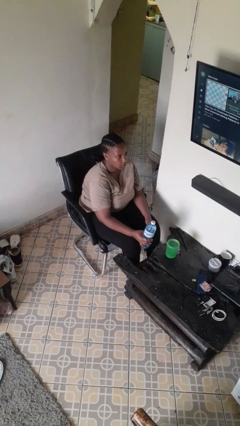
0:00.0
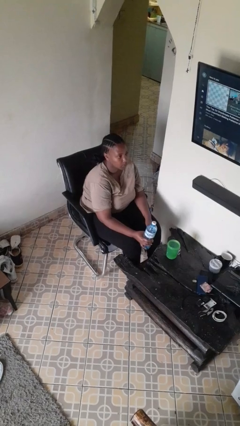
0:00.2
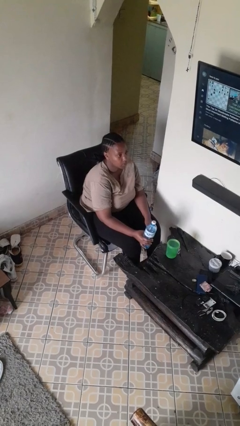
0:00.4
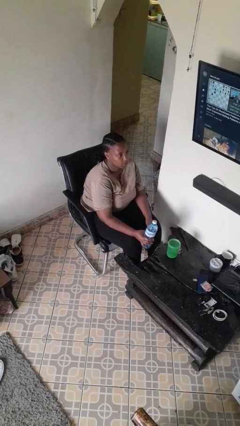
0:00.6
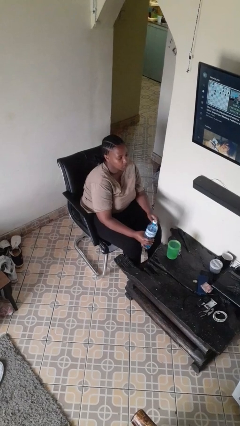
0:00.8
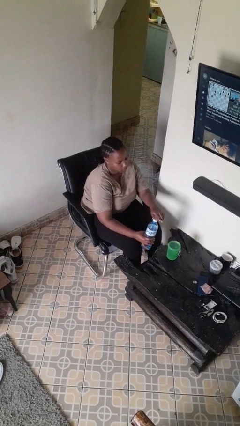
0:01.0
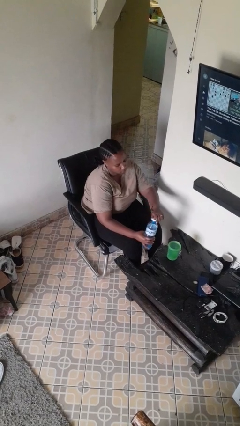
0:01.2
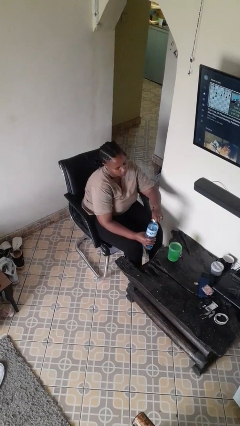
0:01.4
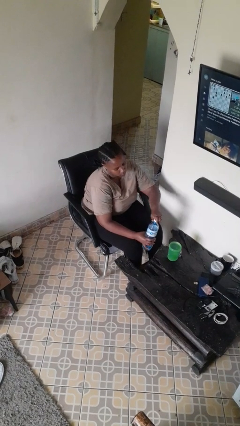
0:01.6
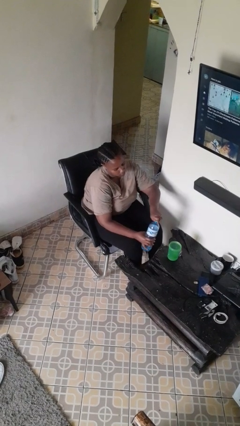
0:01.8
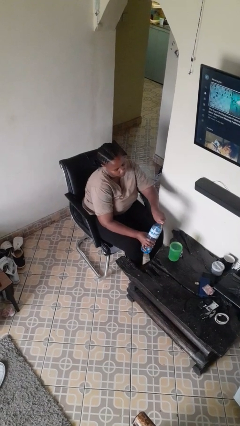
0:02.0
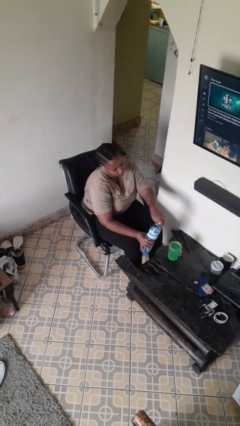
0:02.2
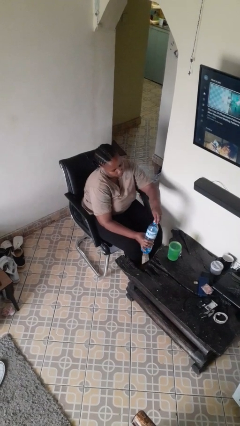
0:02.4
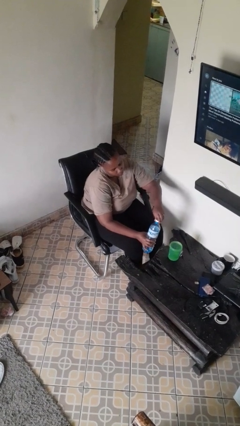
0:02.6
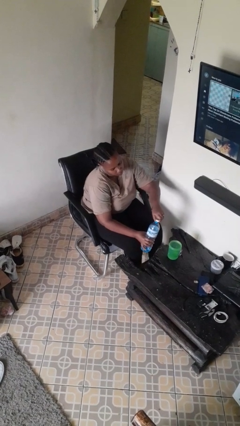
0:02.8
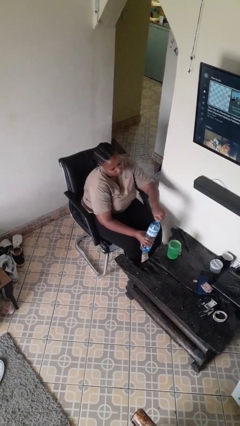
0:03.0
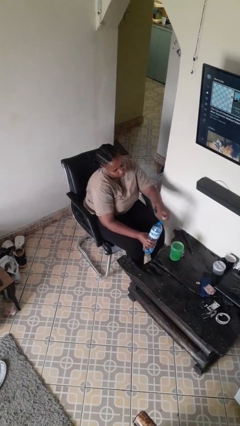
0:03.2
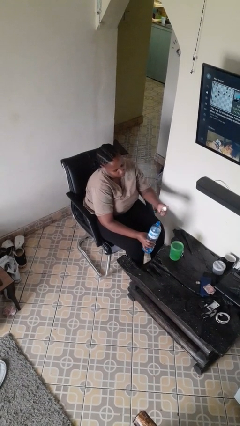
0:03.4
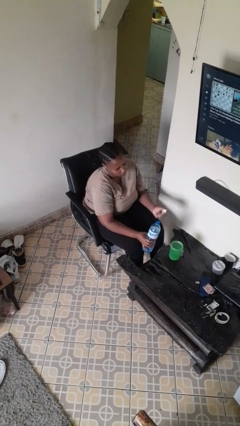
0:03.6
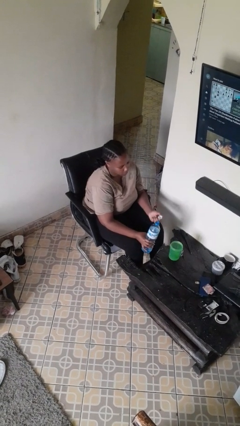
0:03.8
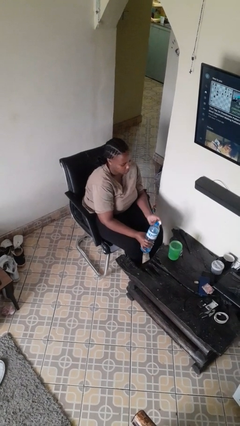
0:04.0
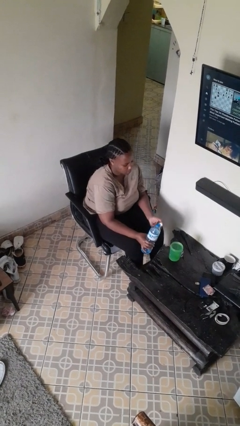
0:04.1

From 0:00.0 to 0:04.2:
person unscrews lid from bottle

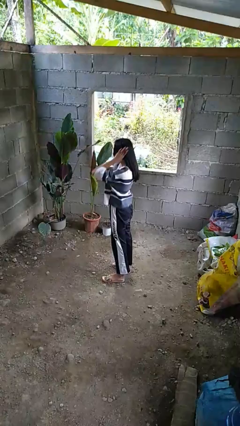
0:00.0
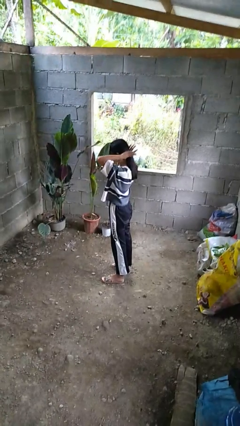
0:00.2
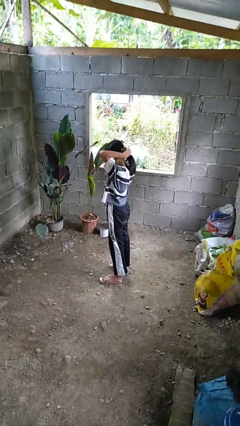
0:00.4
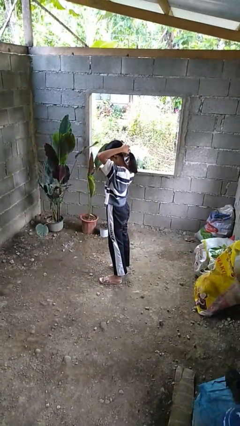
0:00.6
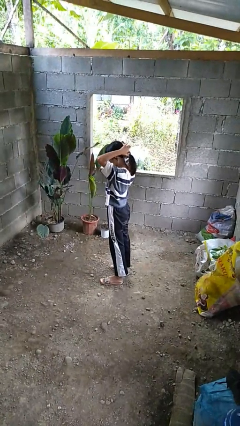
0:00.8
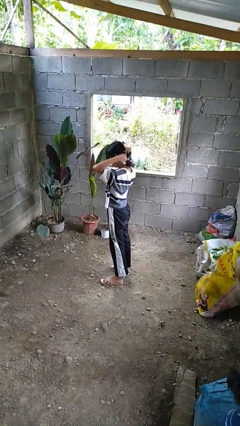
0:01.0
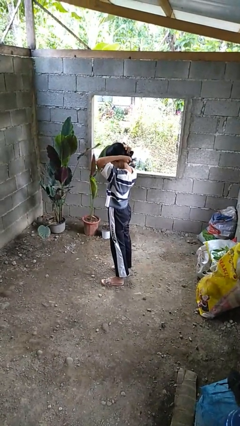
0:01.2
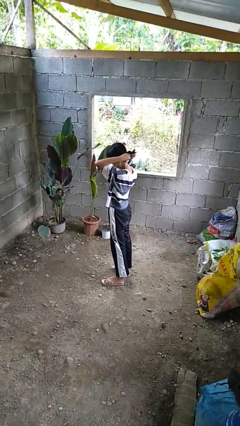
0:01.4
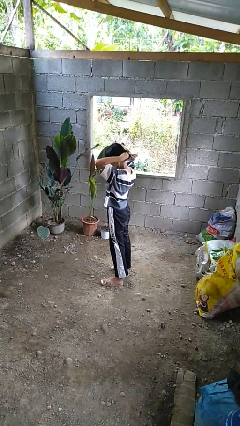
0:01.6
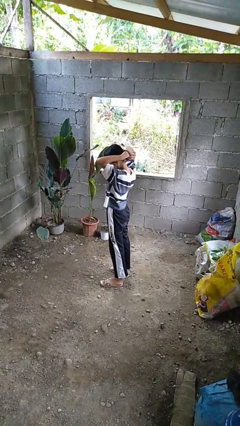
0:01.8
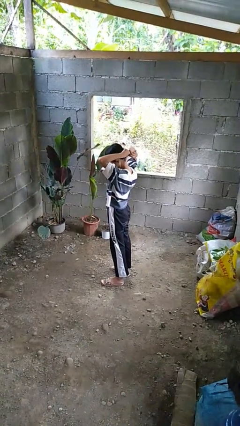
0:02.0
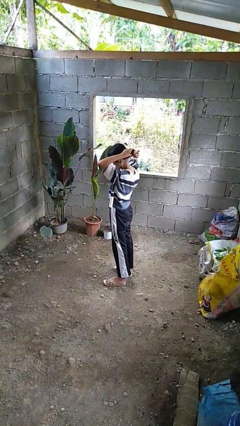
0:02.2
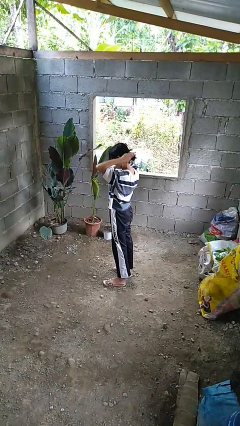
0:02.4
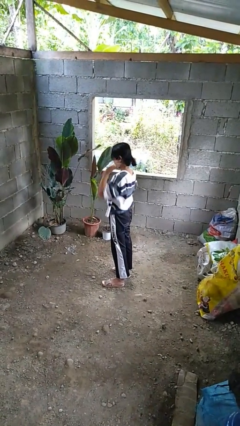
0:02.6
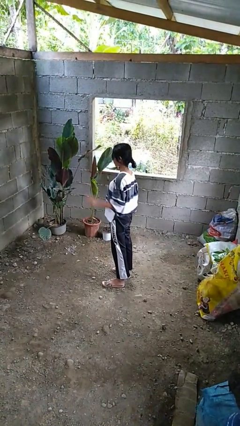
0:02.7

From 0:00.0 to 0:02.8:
person puts hair in ponytail

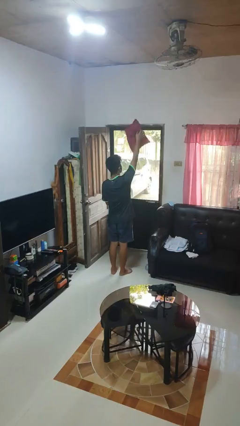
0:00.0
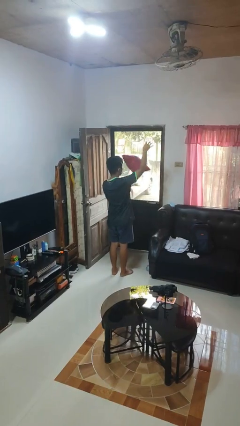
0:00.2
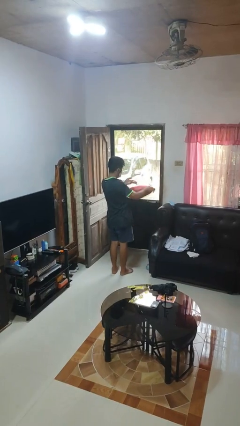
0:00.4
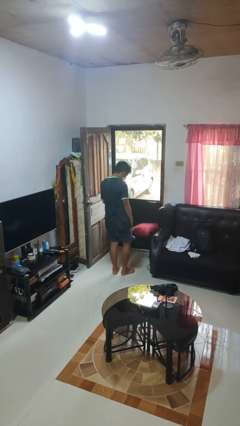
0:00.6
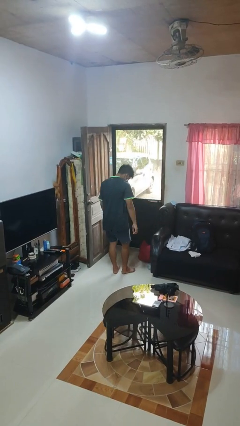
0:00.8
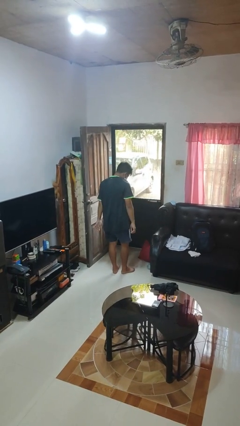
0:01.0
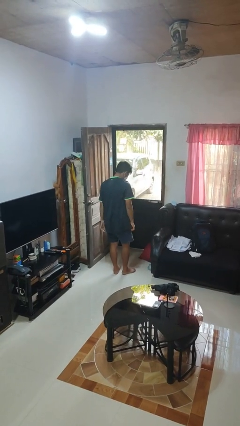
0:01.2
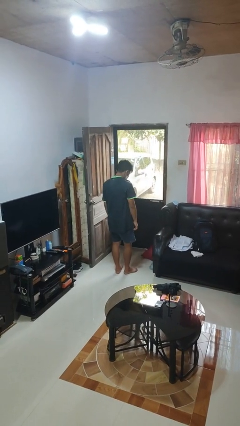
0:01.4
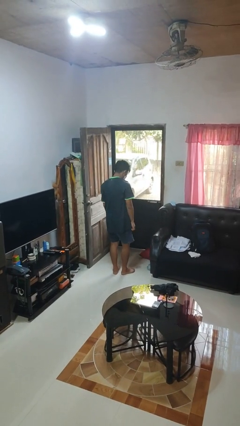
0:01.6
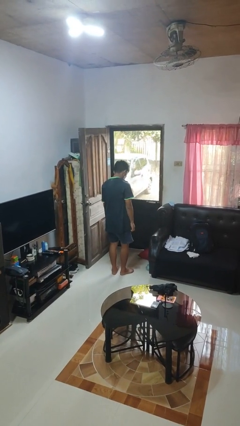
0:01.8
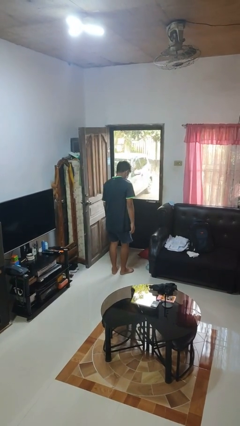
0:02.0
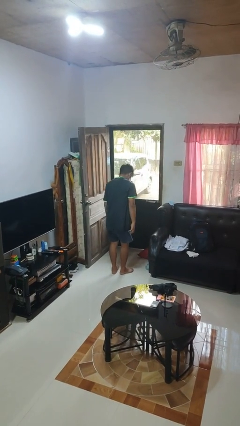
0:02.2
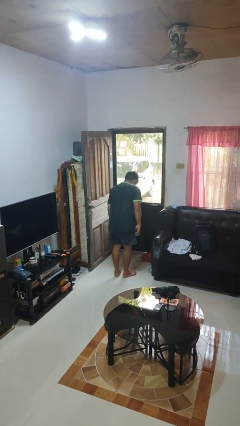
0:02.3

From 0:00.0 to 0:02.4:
person drops object

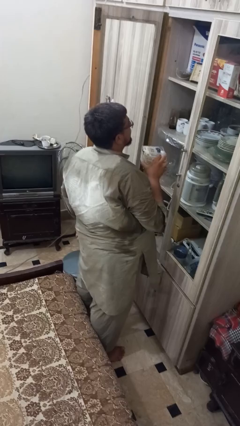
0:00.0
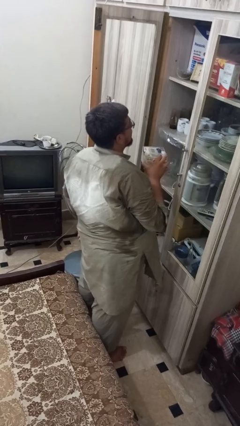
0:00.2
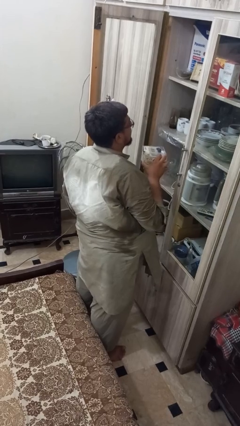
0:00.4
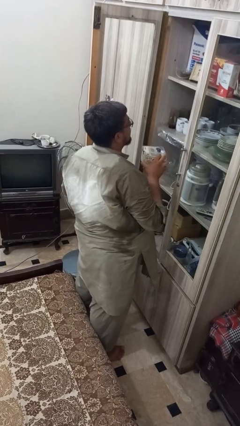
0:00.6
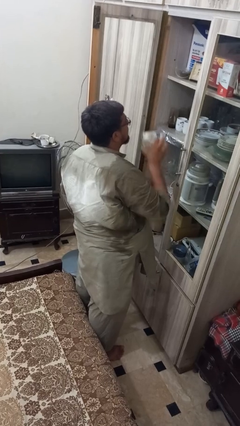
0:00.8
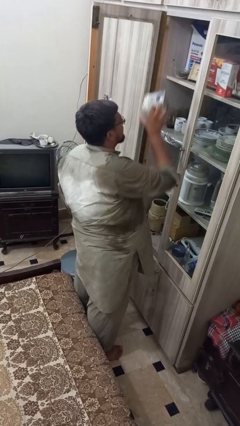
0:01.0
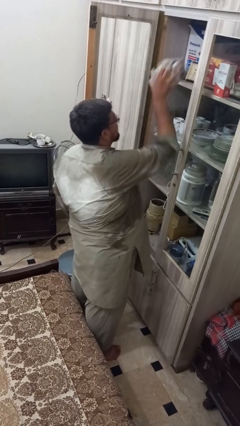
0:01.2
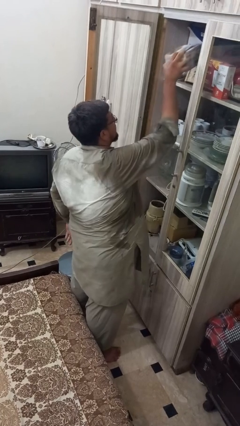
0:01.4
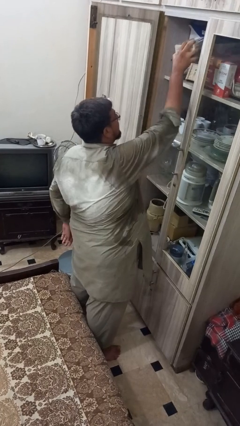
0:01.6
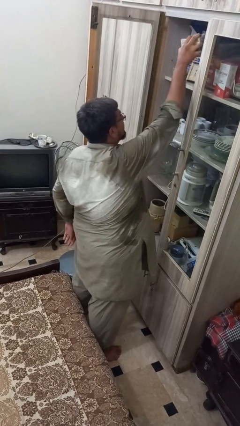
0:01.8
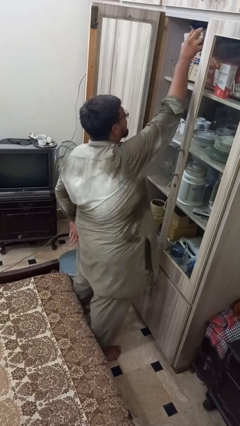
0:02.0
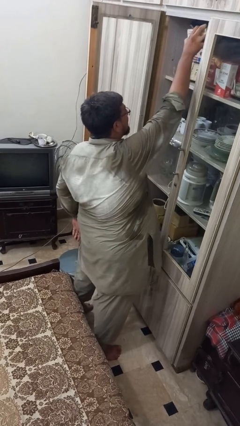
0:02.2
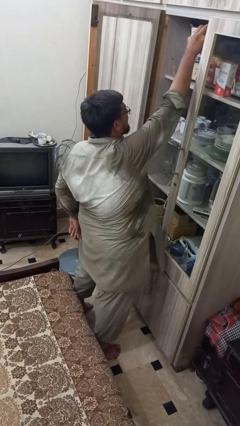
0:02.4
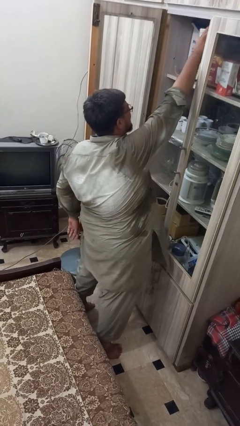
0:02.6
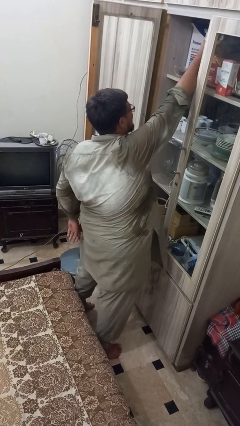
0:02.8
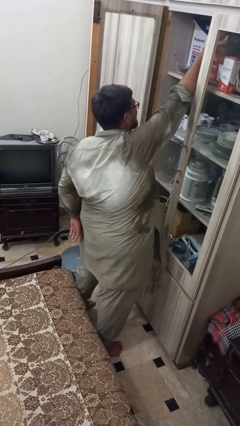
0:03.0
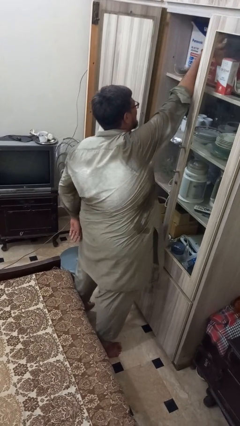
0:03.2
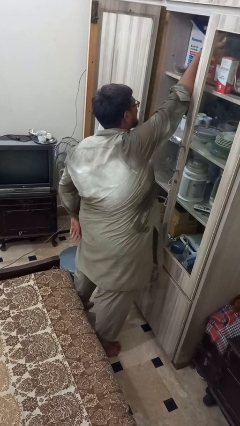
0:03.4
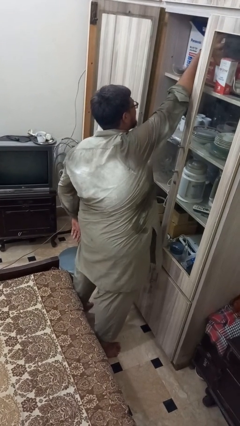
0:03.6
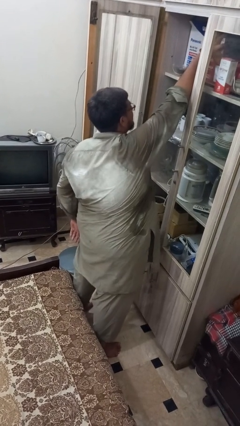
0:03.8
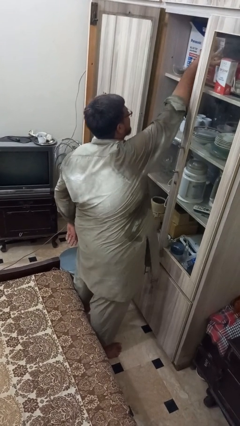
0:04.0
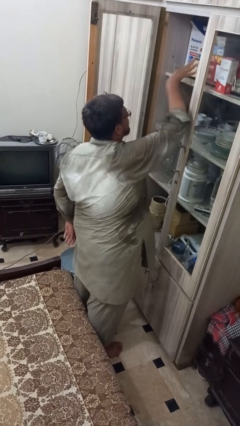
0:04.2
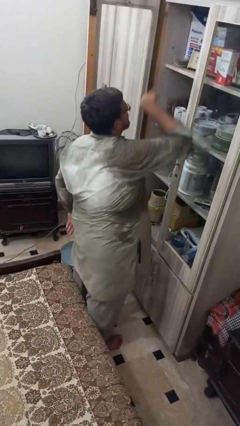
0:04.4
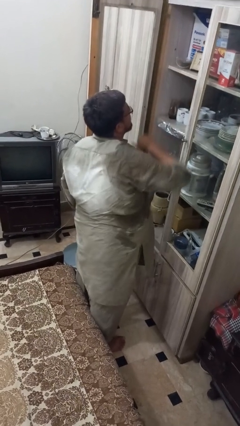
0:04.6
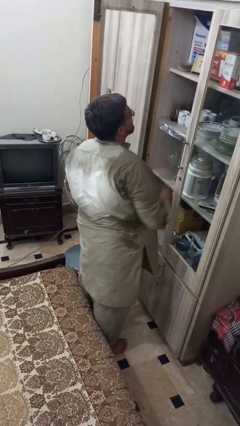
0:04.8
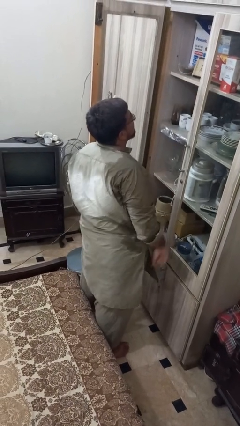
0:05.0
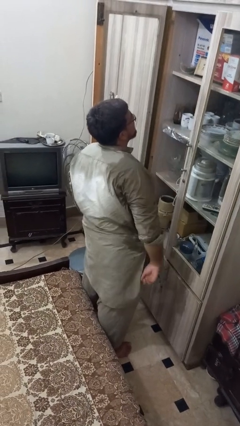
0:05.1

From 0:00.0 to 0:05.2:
person puts down object on shelf

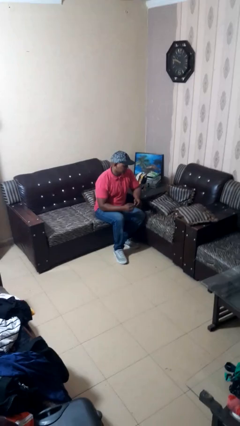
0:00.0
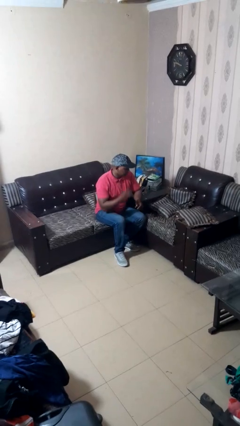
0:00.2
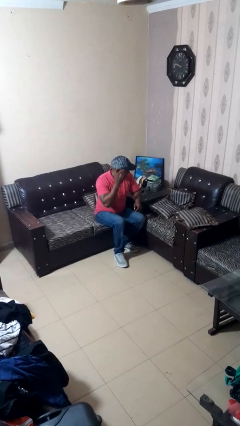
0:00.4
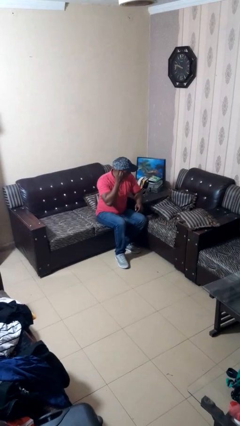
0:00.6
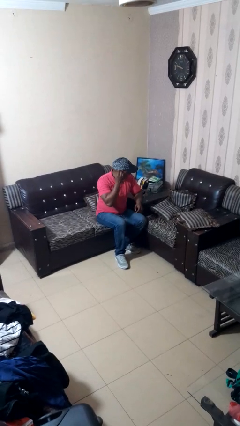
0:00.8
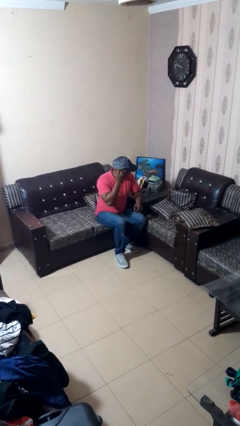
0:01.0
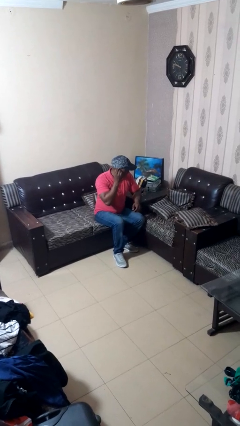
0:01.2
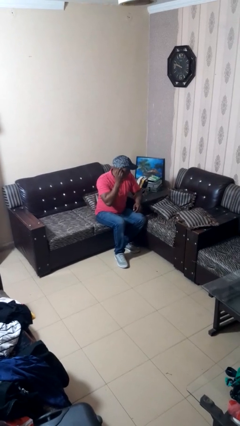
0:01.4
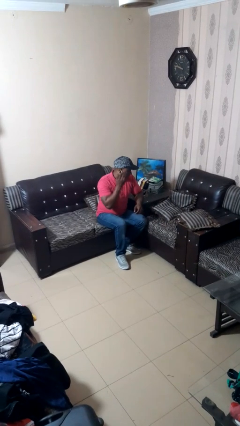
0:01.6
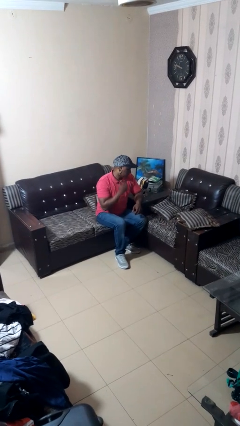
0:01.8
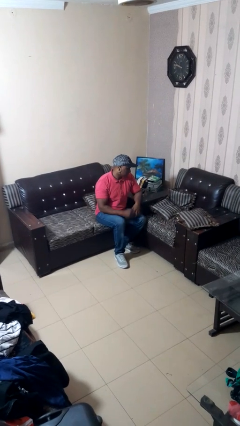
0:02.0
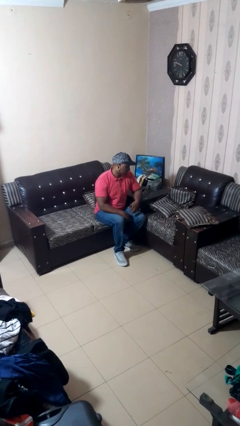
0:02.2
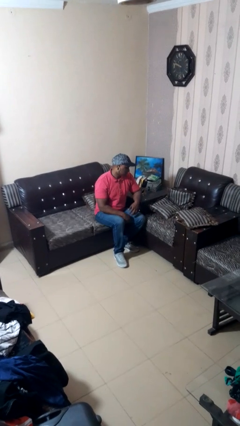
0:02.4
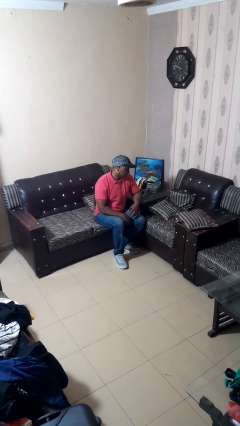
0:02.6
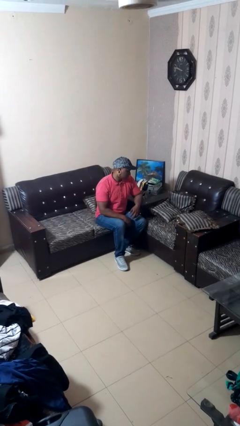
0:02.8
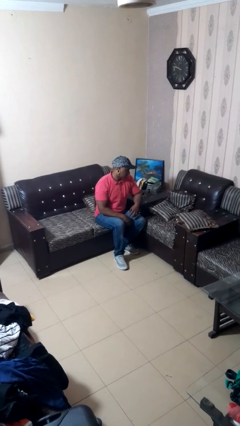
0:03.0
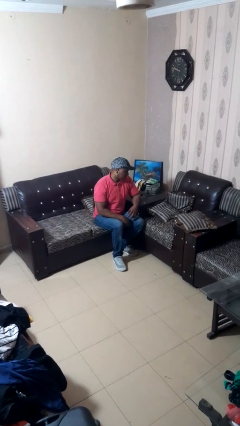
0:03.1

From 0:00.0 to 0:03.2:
person puts on earrings
